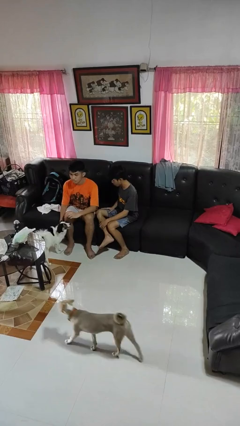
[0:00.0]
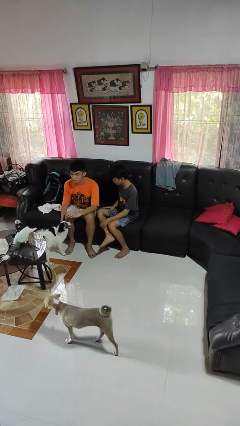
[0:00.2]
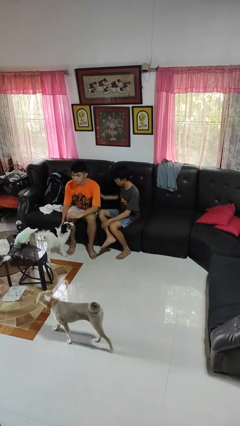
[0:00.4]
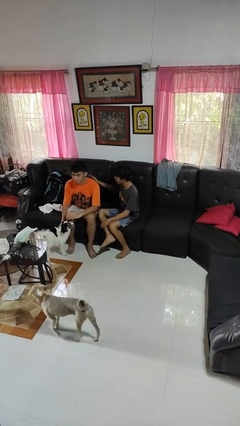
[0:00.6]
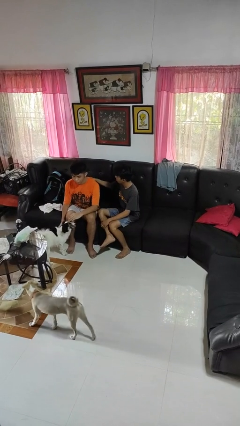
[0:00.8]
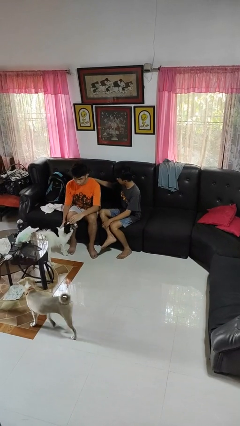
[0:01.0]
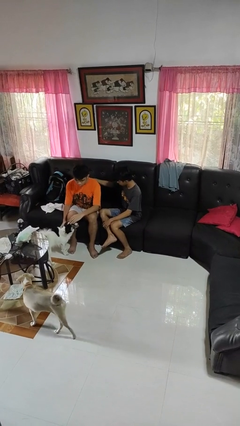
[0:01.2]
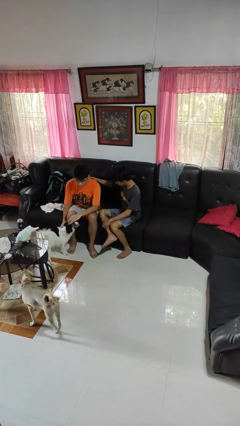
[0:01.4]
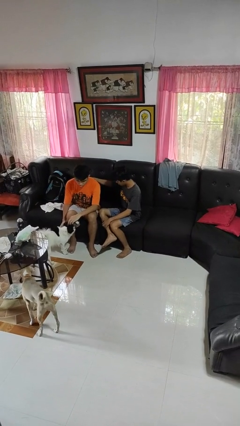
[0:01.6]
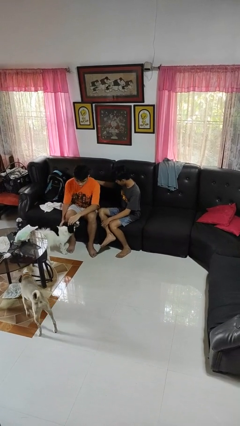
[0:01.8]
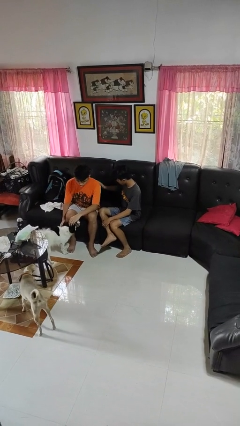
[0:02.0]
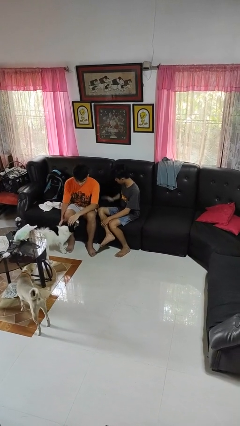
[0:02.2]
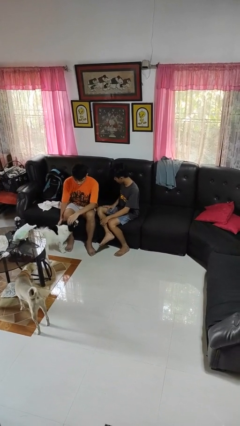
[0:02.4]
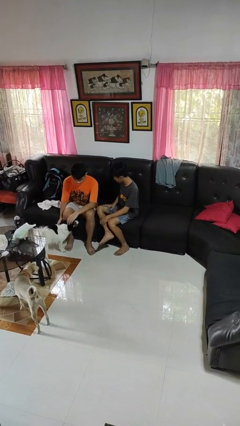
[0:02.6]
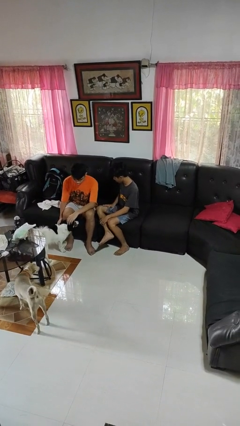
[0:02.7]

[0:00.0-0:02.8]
person touches back of person

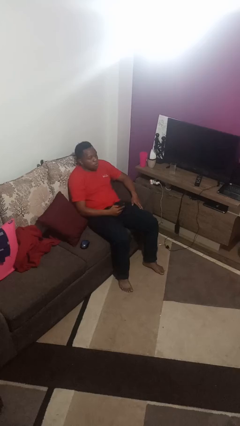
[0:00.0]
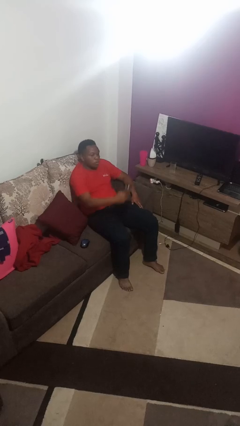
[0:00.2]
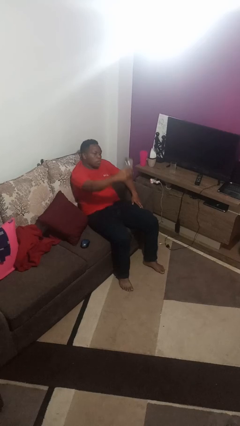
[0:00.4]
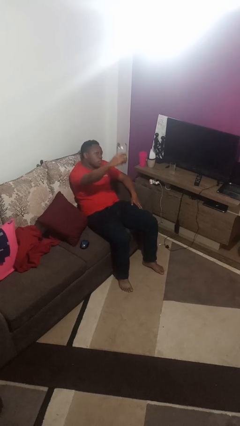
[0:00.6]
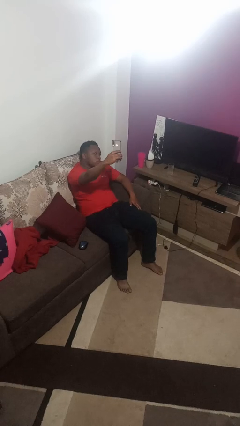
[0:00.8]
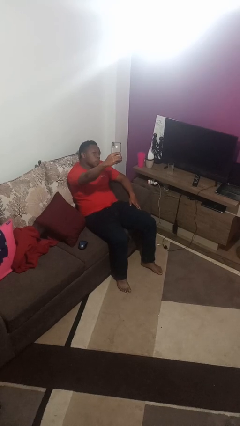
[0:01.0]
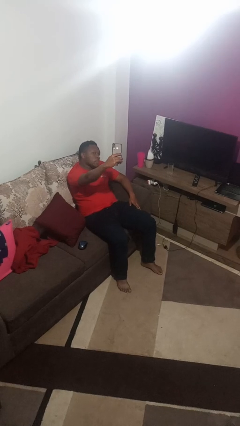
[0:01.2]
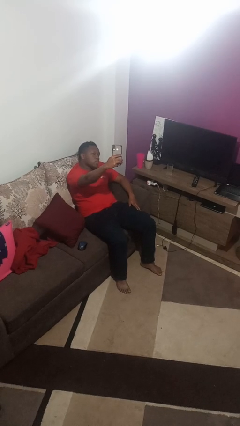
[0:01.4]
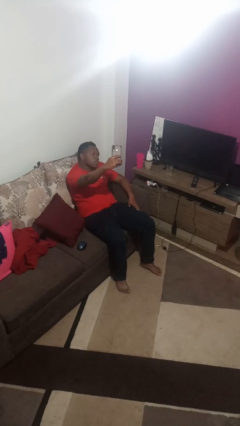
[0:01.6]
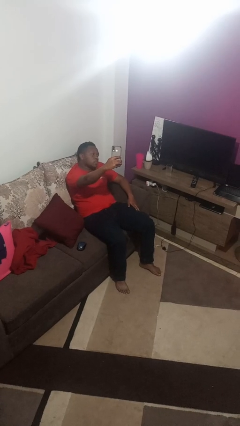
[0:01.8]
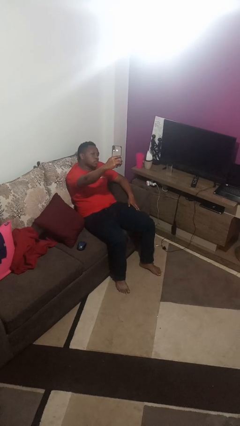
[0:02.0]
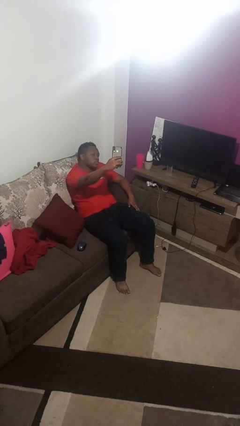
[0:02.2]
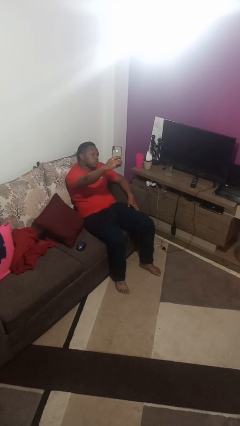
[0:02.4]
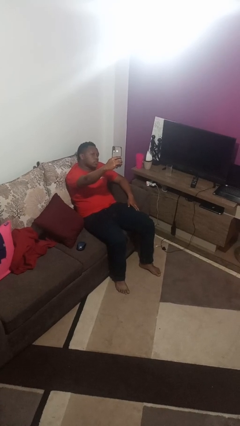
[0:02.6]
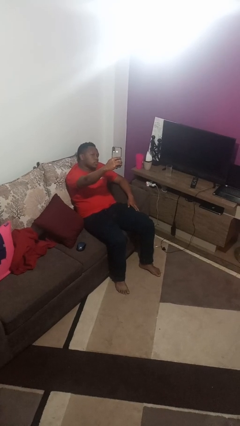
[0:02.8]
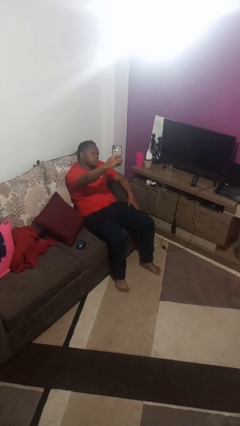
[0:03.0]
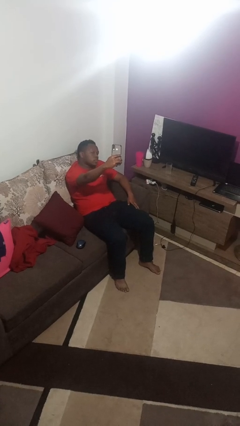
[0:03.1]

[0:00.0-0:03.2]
person takes selfie

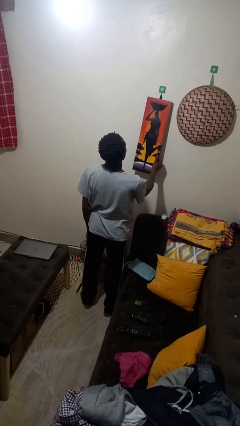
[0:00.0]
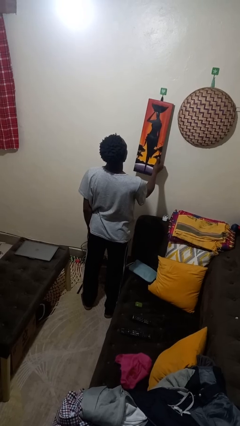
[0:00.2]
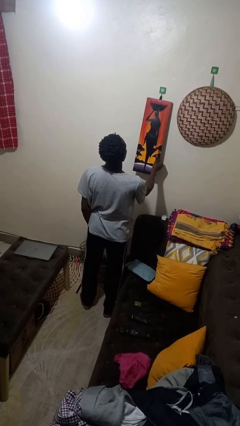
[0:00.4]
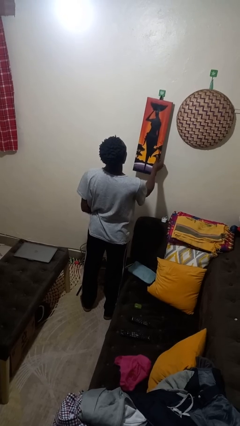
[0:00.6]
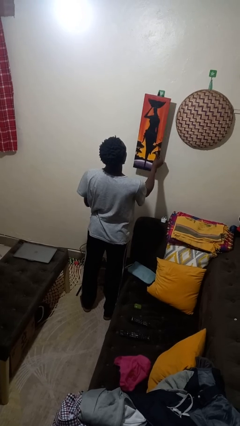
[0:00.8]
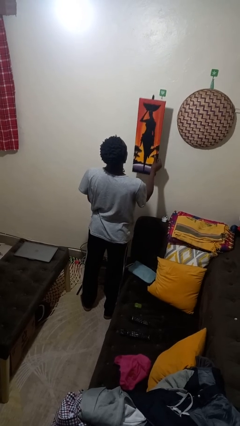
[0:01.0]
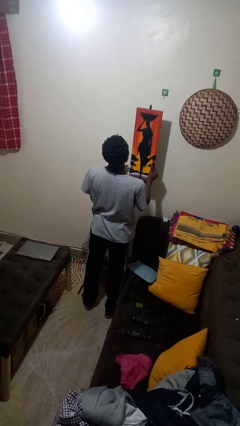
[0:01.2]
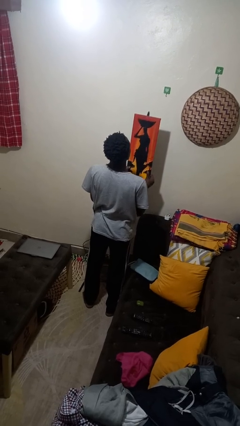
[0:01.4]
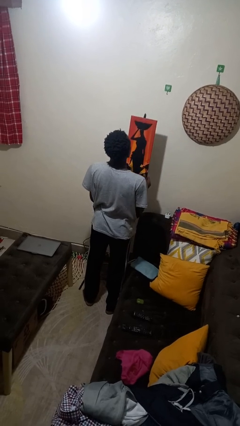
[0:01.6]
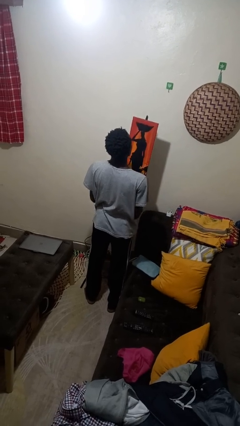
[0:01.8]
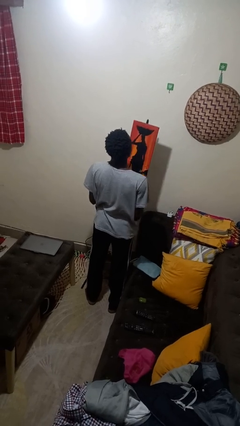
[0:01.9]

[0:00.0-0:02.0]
person takes down picture frame

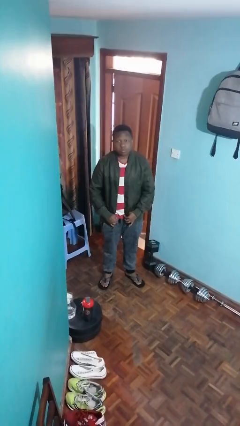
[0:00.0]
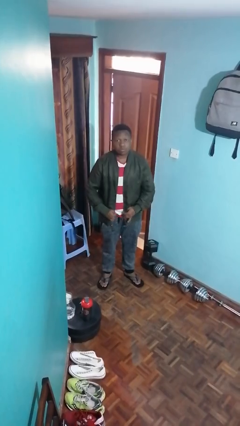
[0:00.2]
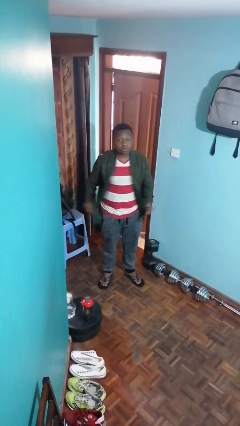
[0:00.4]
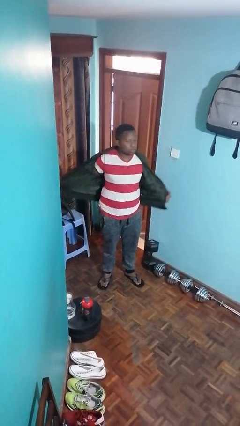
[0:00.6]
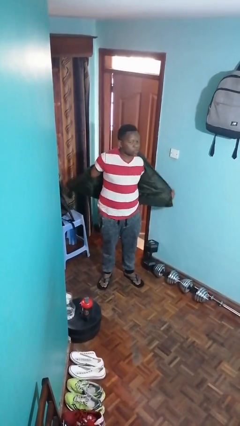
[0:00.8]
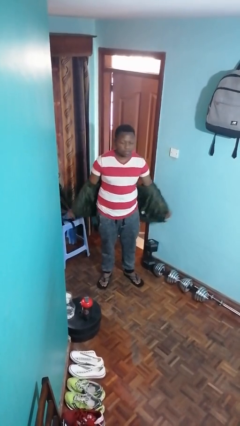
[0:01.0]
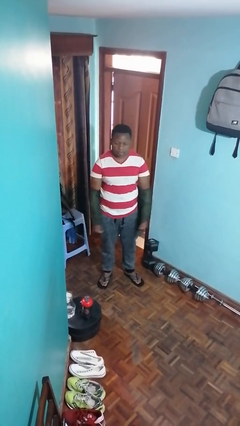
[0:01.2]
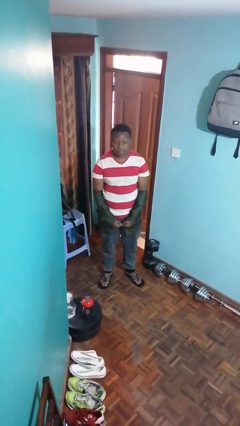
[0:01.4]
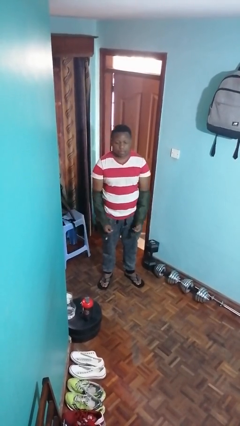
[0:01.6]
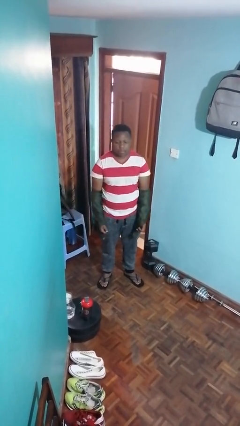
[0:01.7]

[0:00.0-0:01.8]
person takes off jacket

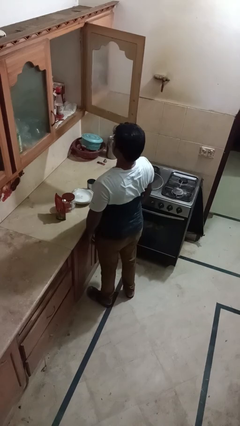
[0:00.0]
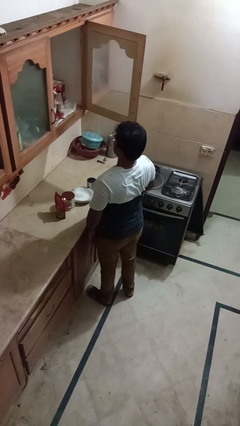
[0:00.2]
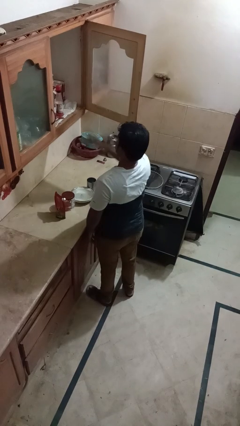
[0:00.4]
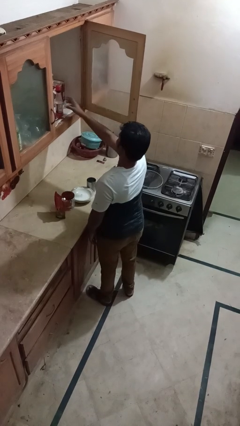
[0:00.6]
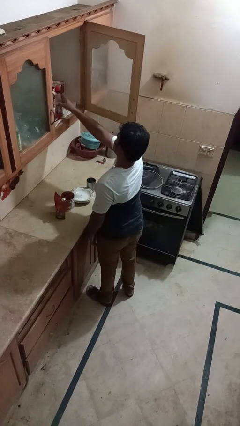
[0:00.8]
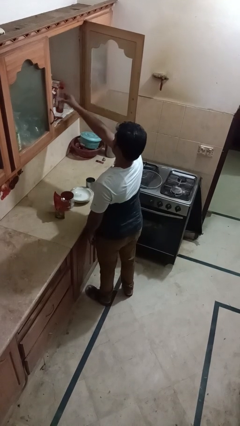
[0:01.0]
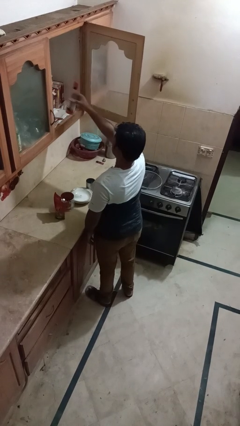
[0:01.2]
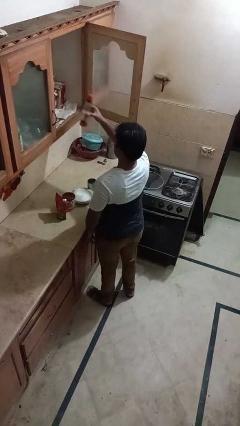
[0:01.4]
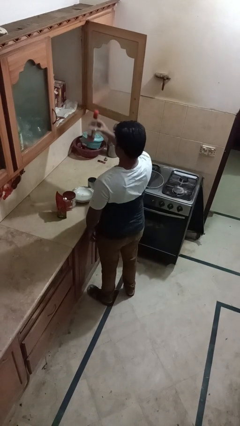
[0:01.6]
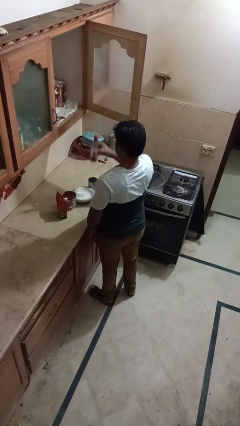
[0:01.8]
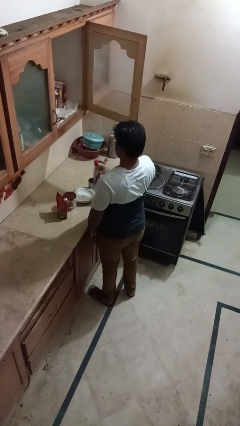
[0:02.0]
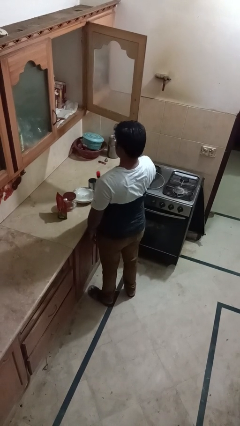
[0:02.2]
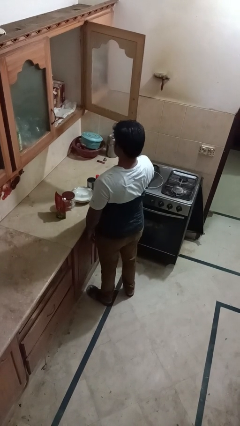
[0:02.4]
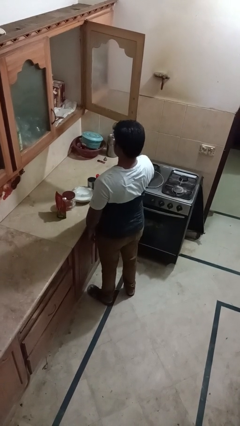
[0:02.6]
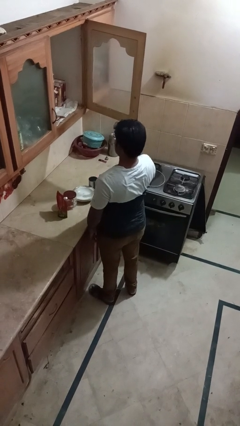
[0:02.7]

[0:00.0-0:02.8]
person takes object from cabinet

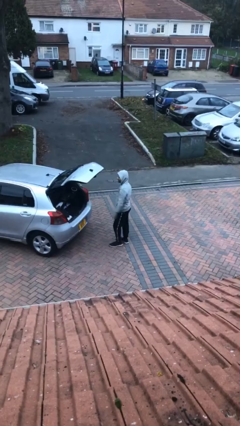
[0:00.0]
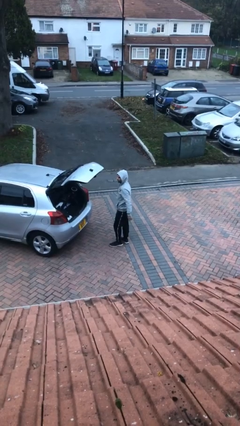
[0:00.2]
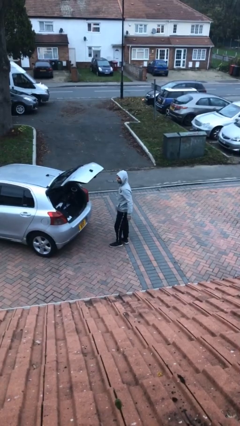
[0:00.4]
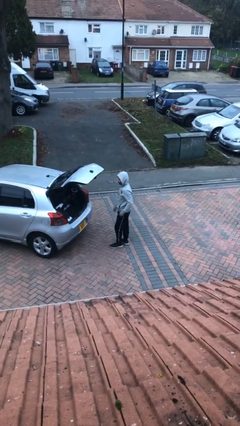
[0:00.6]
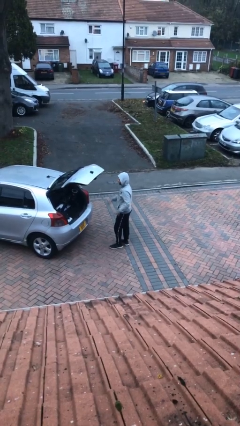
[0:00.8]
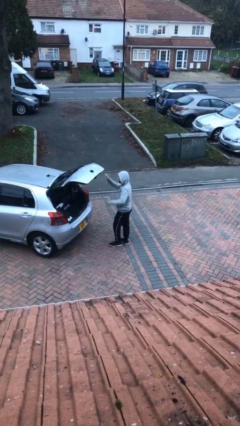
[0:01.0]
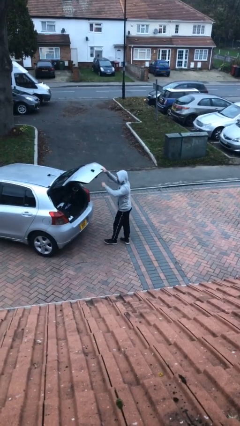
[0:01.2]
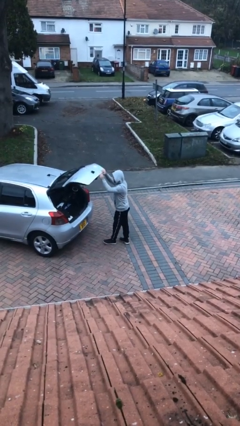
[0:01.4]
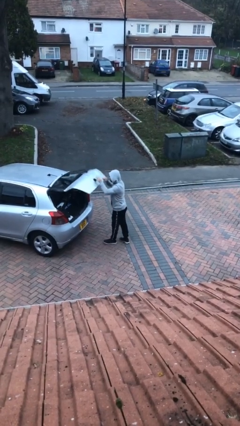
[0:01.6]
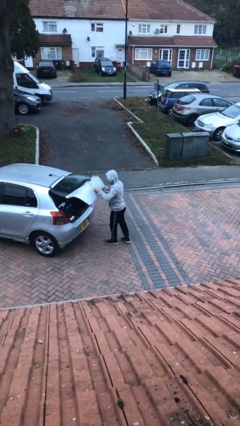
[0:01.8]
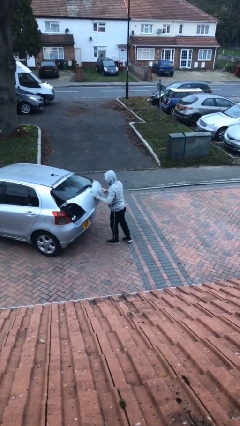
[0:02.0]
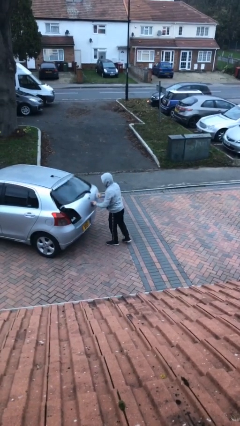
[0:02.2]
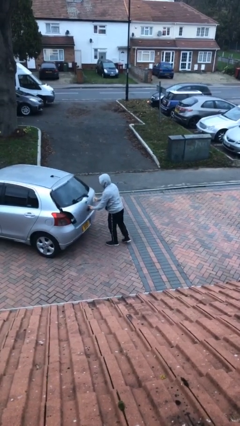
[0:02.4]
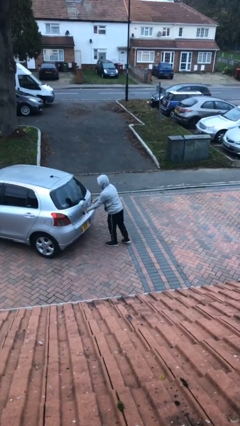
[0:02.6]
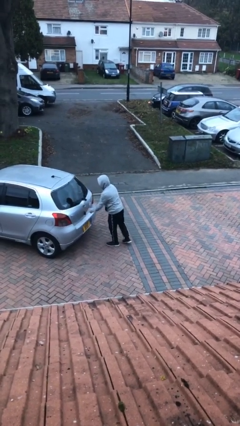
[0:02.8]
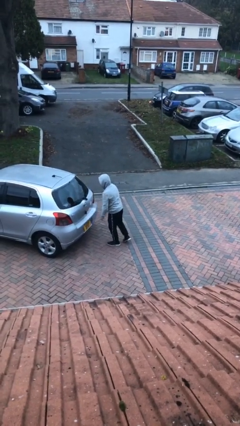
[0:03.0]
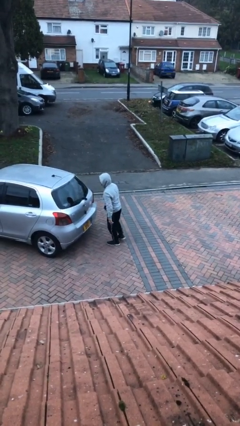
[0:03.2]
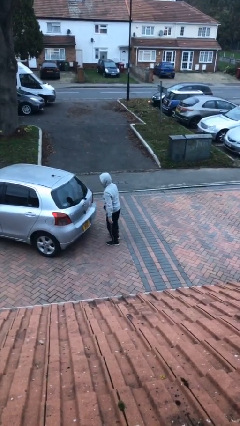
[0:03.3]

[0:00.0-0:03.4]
person closes car trunk

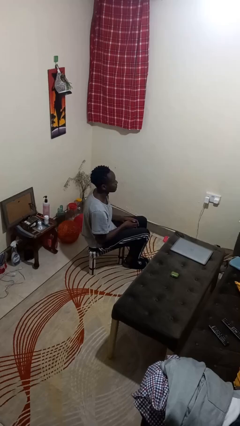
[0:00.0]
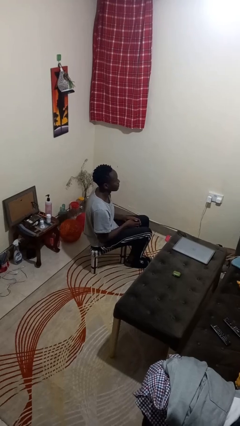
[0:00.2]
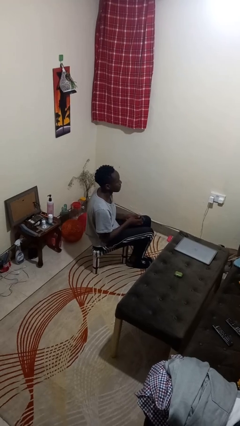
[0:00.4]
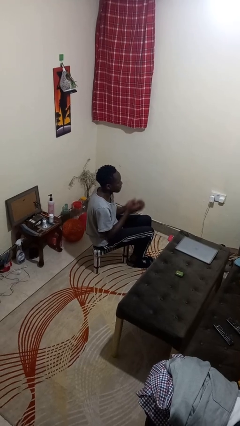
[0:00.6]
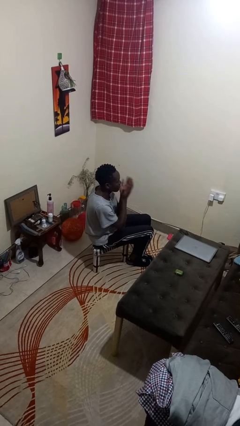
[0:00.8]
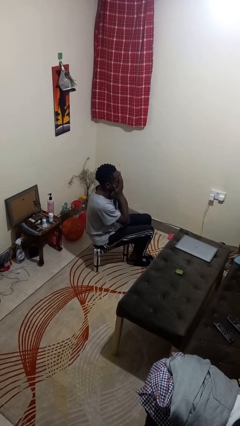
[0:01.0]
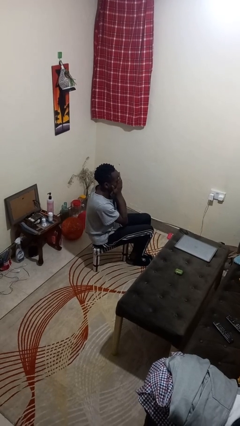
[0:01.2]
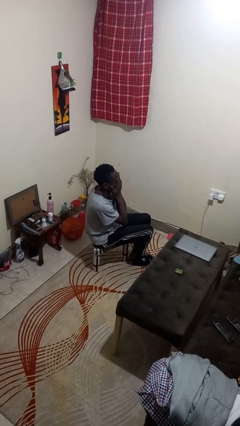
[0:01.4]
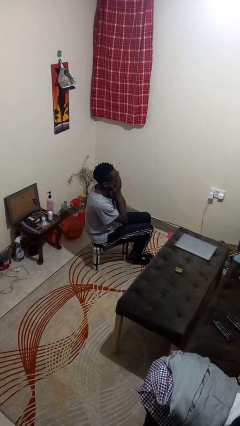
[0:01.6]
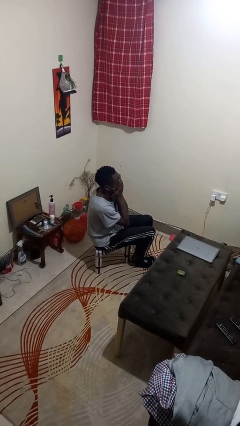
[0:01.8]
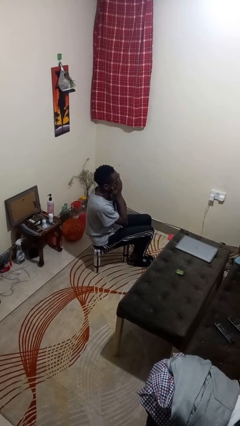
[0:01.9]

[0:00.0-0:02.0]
person covers face with hands
